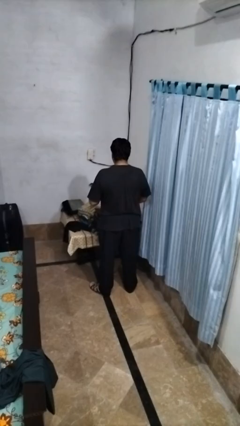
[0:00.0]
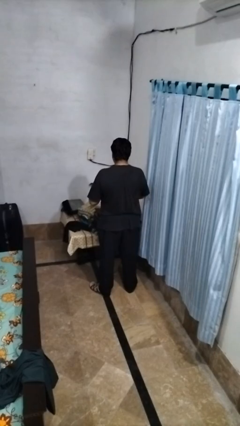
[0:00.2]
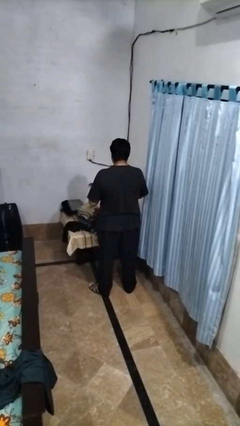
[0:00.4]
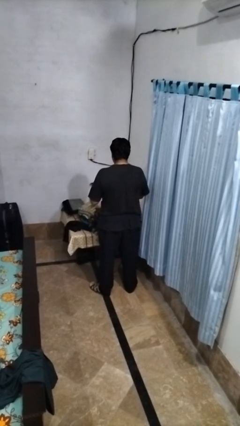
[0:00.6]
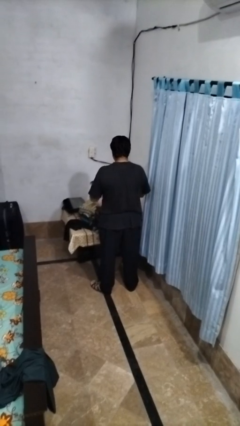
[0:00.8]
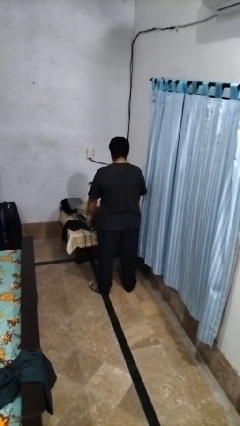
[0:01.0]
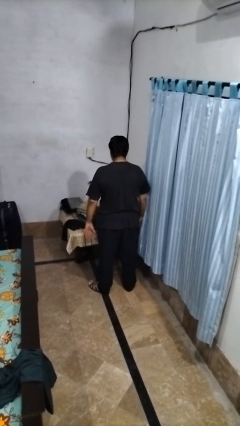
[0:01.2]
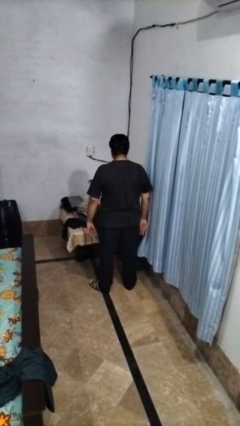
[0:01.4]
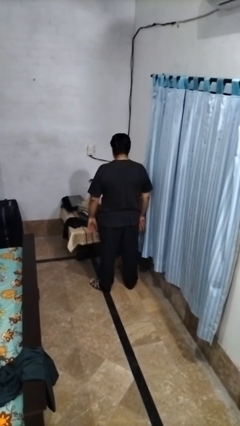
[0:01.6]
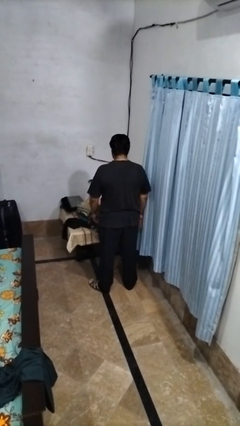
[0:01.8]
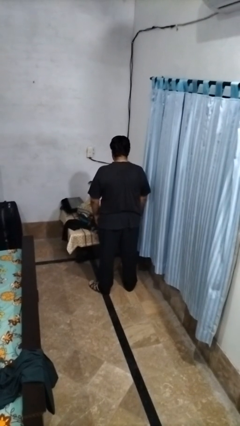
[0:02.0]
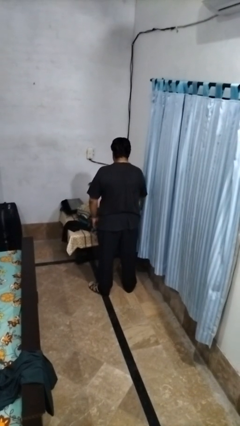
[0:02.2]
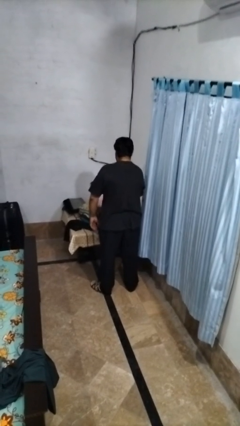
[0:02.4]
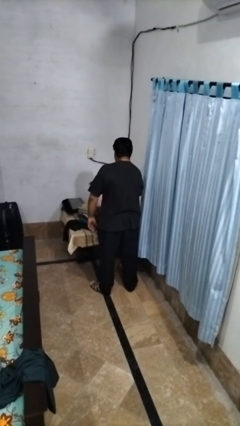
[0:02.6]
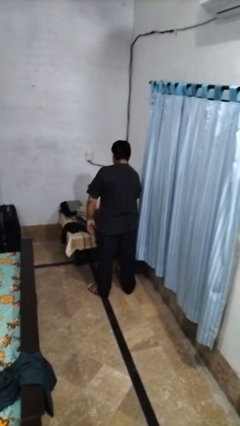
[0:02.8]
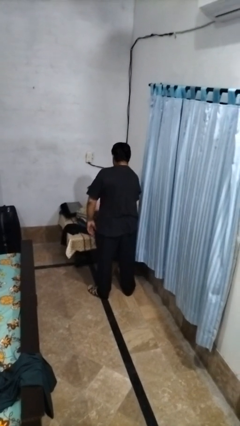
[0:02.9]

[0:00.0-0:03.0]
person loads clothes into suitcase

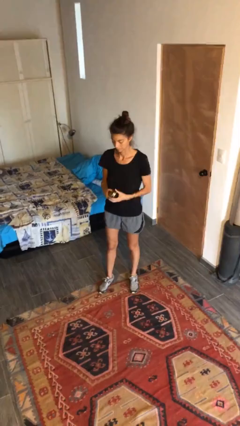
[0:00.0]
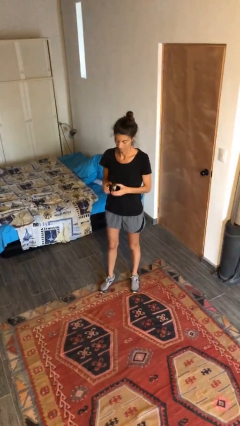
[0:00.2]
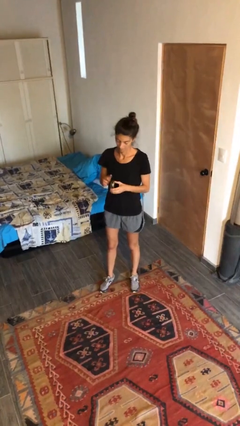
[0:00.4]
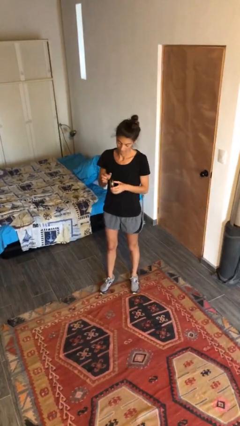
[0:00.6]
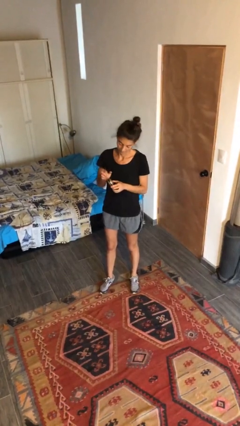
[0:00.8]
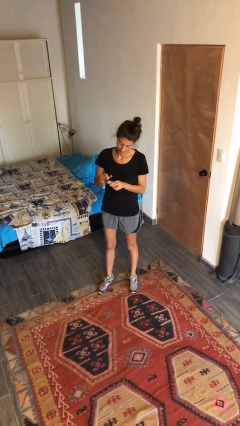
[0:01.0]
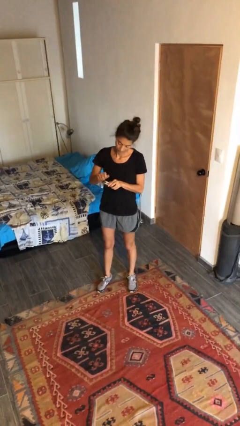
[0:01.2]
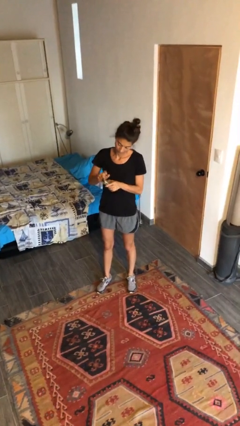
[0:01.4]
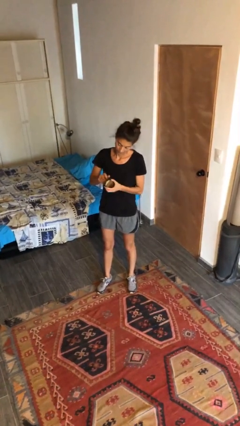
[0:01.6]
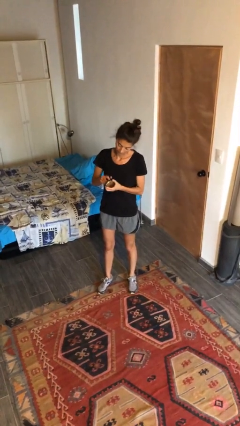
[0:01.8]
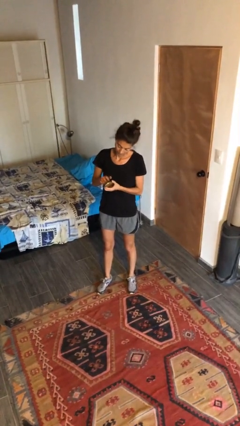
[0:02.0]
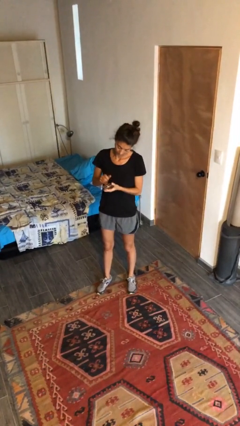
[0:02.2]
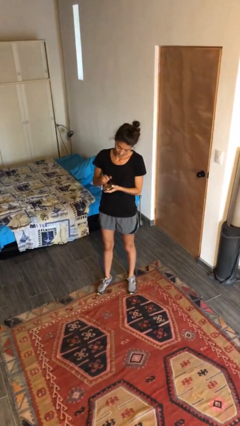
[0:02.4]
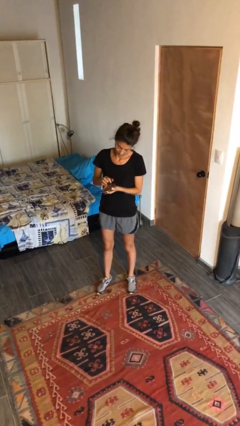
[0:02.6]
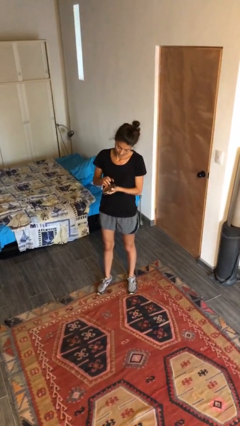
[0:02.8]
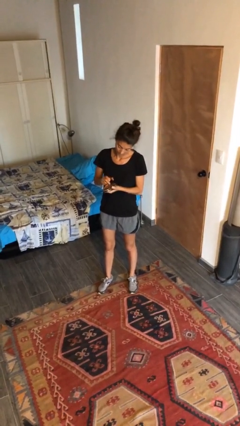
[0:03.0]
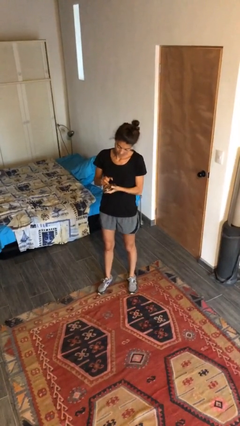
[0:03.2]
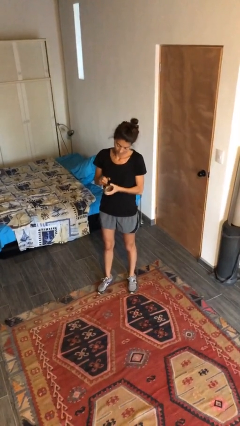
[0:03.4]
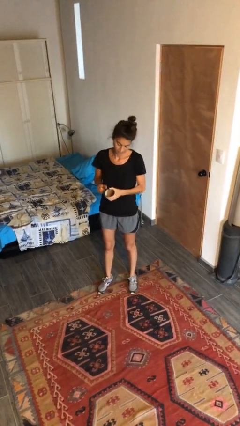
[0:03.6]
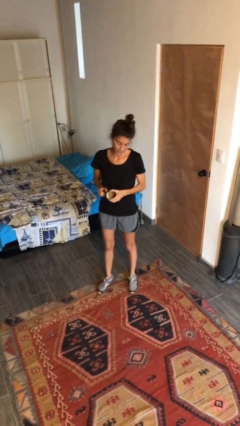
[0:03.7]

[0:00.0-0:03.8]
person taps object with finger

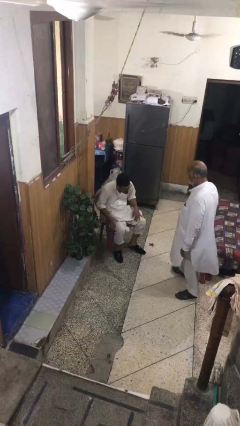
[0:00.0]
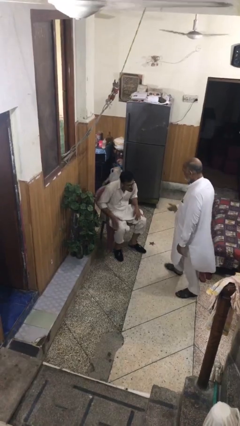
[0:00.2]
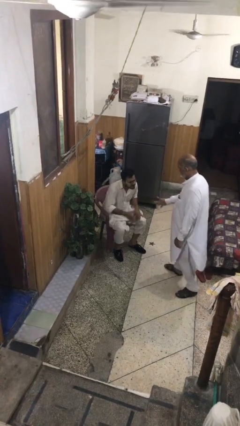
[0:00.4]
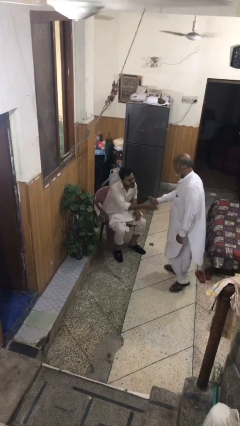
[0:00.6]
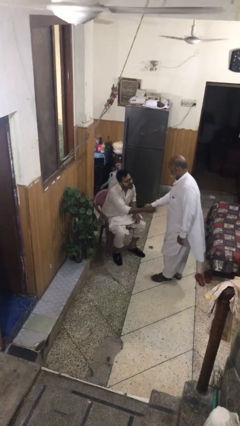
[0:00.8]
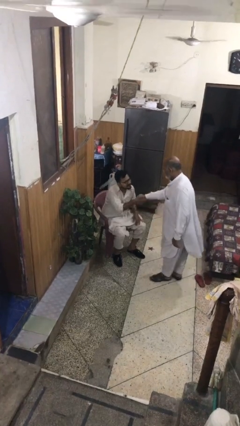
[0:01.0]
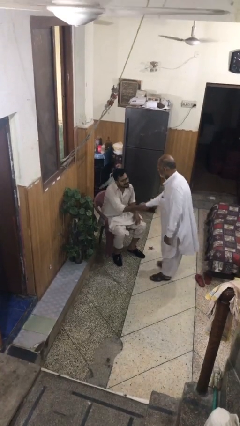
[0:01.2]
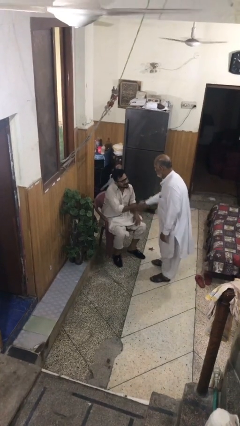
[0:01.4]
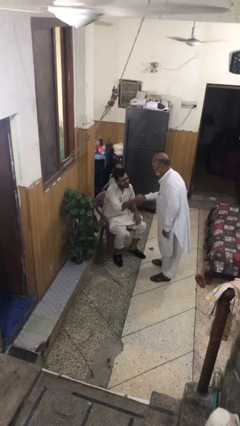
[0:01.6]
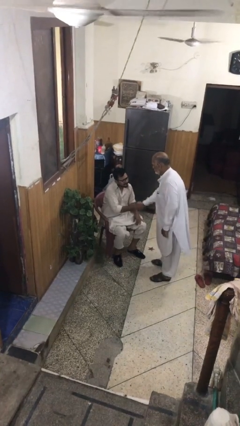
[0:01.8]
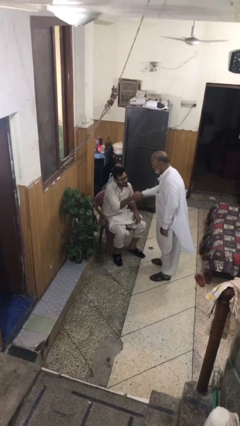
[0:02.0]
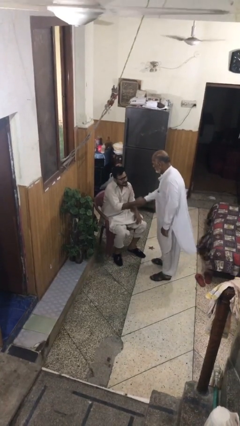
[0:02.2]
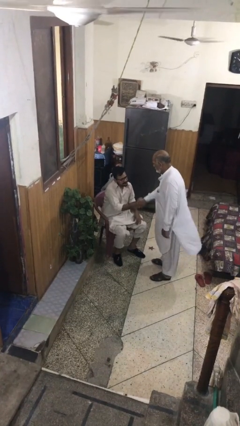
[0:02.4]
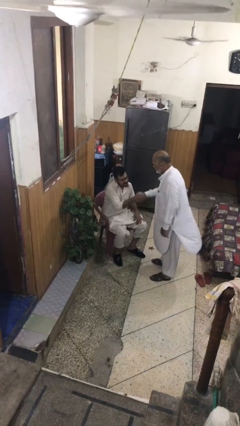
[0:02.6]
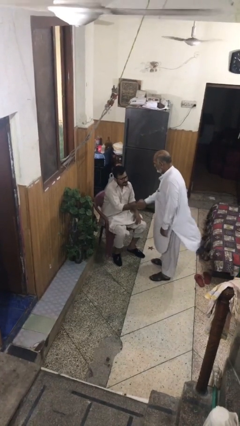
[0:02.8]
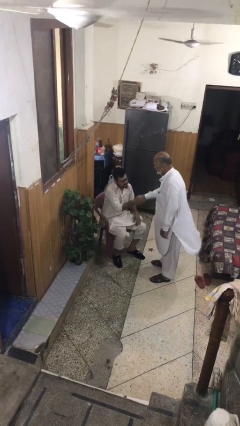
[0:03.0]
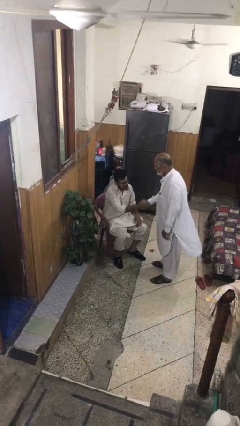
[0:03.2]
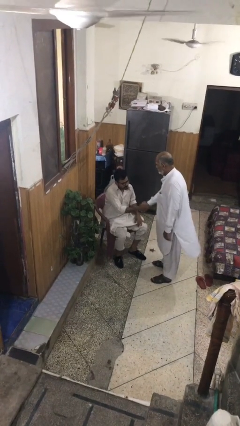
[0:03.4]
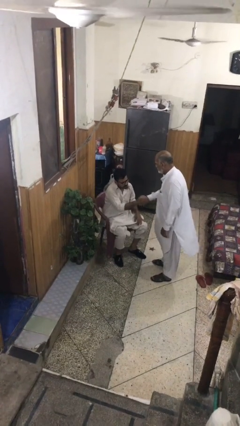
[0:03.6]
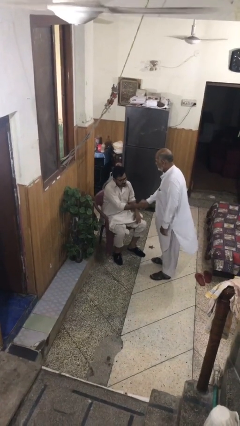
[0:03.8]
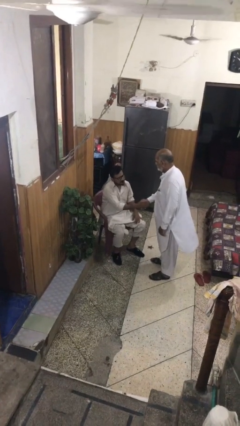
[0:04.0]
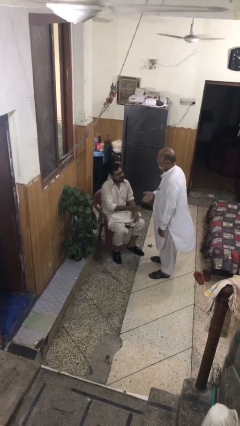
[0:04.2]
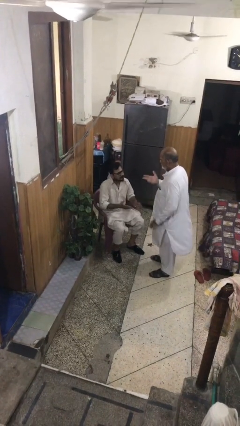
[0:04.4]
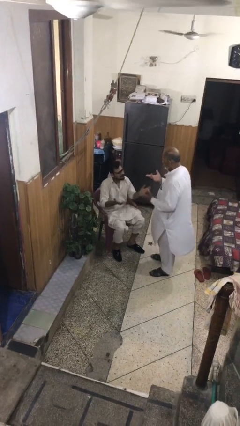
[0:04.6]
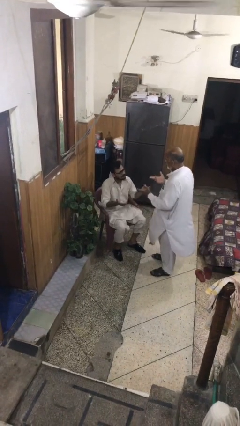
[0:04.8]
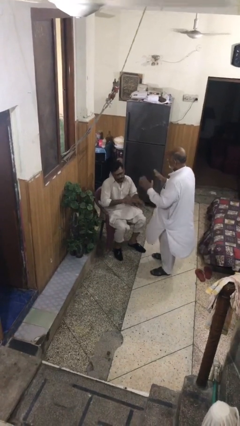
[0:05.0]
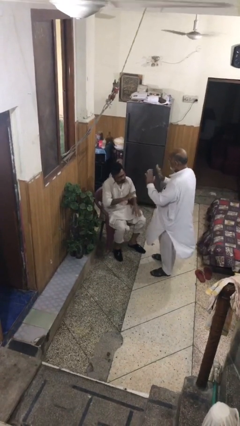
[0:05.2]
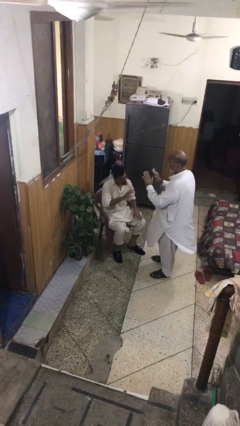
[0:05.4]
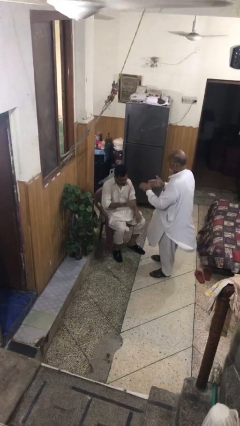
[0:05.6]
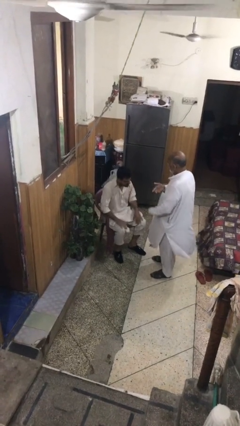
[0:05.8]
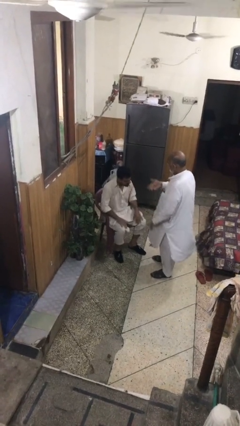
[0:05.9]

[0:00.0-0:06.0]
person shakes hand

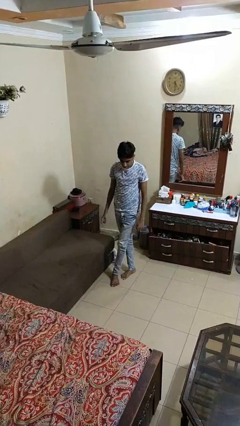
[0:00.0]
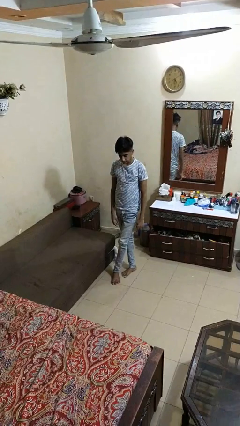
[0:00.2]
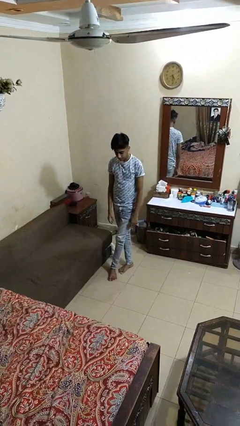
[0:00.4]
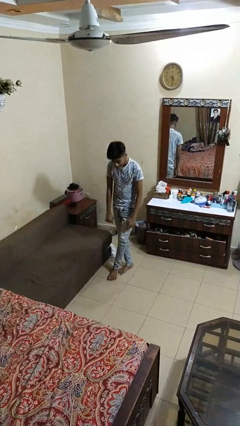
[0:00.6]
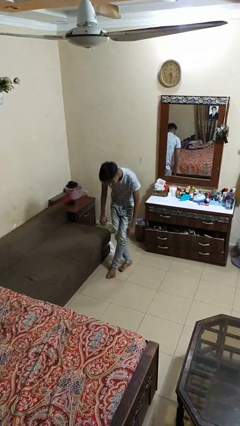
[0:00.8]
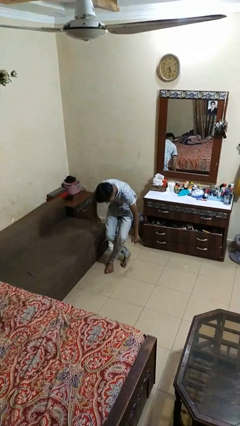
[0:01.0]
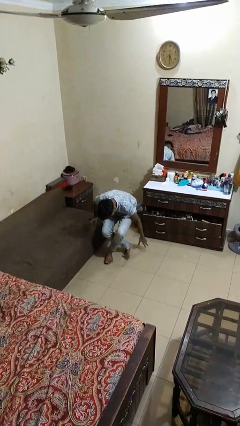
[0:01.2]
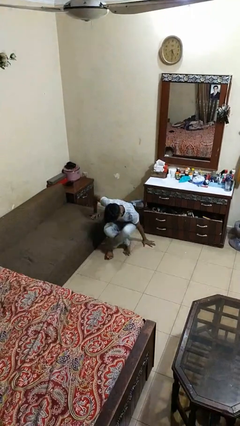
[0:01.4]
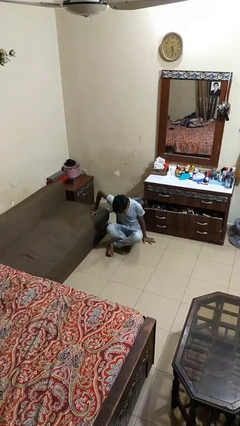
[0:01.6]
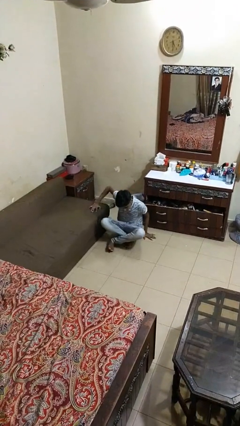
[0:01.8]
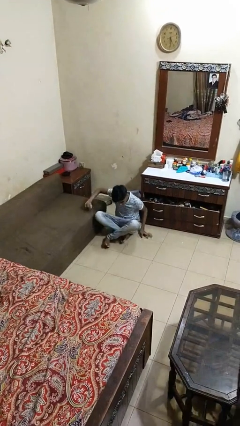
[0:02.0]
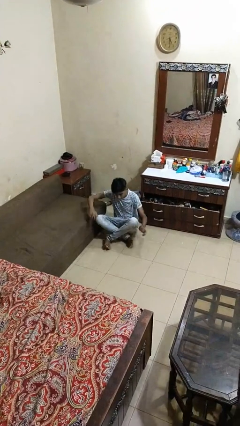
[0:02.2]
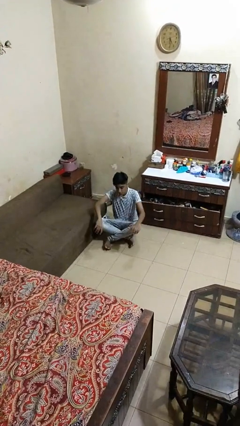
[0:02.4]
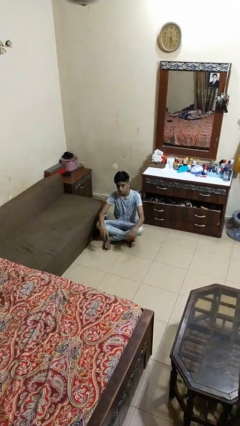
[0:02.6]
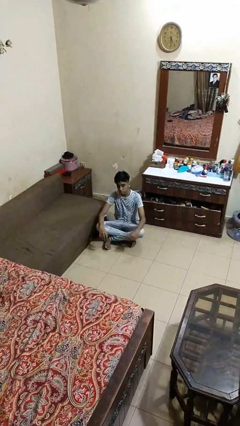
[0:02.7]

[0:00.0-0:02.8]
person sits crisscross

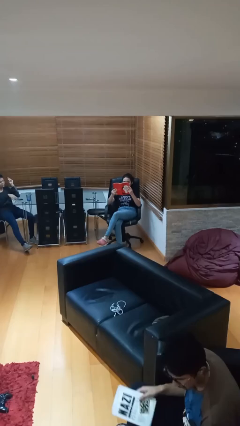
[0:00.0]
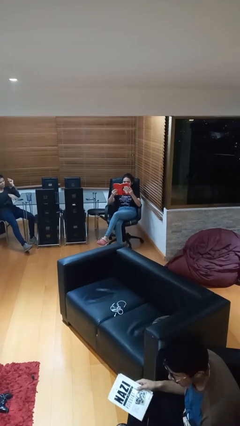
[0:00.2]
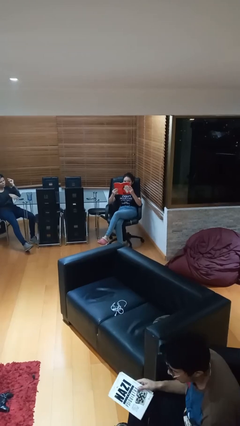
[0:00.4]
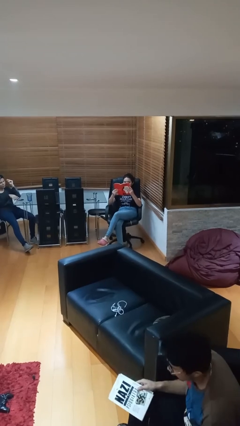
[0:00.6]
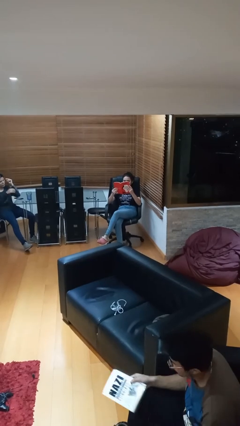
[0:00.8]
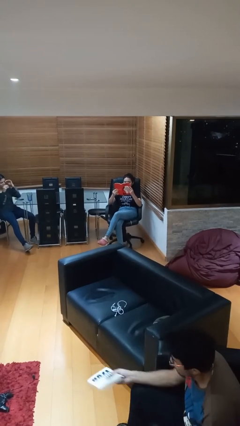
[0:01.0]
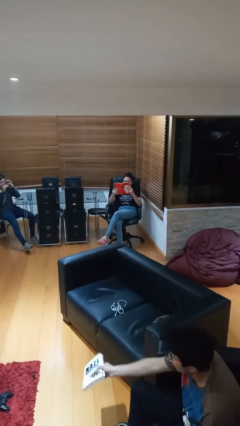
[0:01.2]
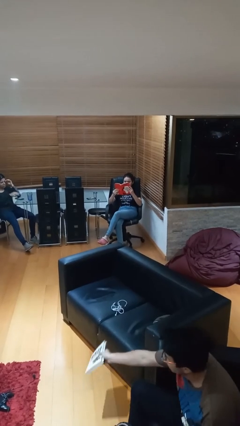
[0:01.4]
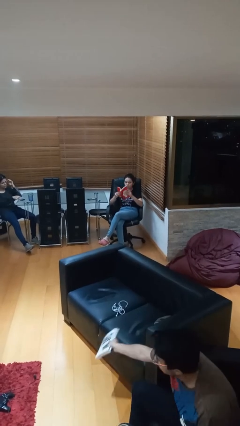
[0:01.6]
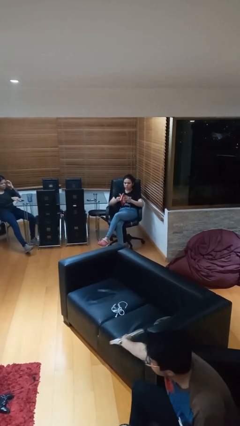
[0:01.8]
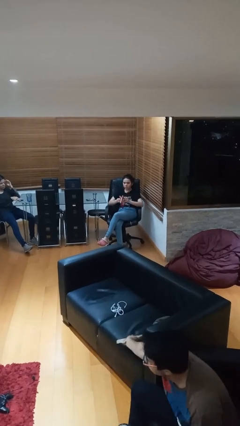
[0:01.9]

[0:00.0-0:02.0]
person reads document
